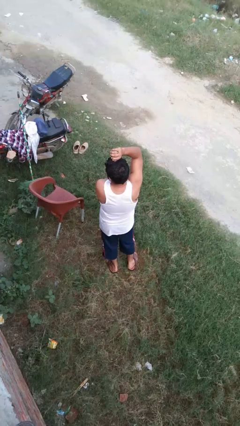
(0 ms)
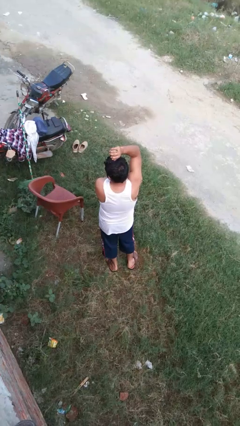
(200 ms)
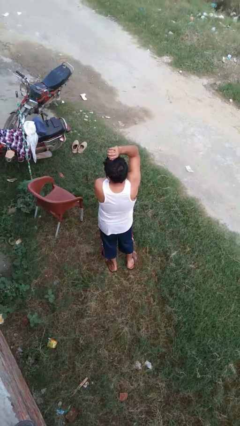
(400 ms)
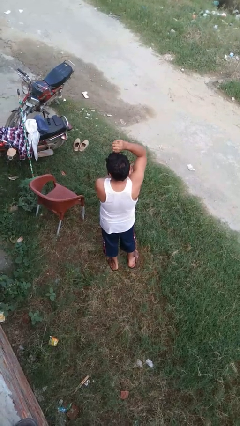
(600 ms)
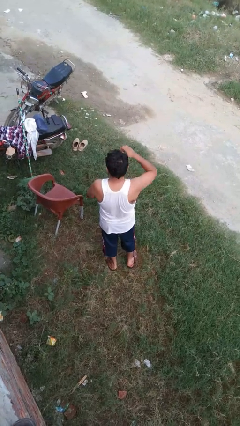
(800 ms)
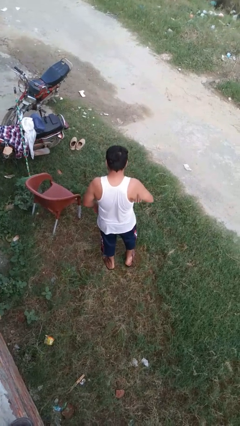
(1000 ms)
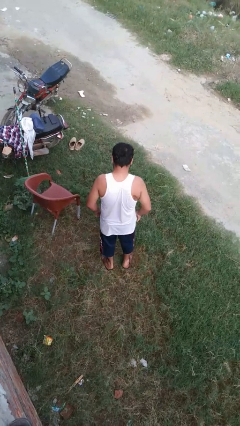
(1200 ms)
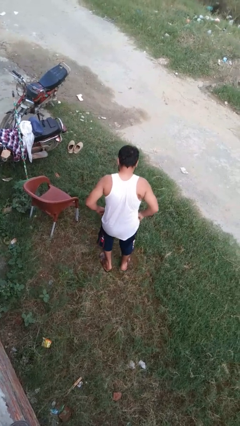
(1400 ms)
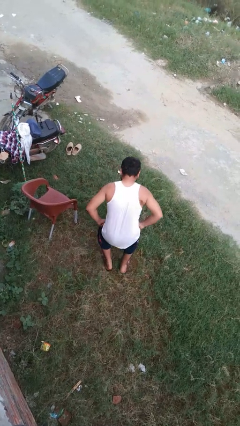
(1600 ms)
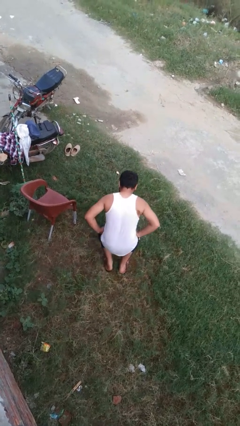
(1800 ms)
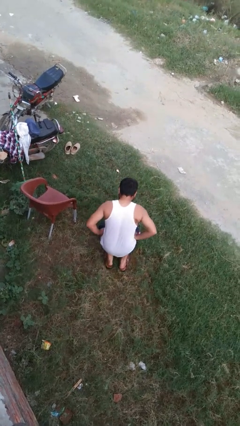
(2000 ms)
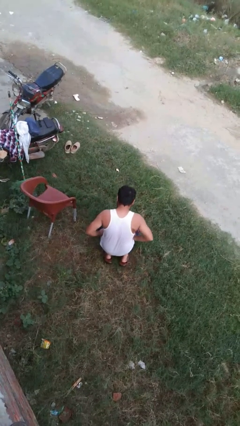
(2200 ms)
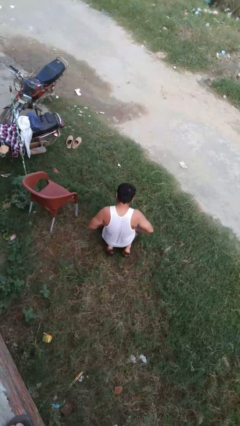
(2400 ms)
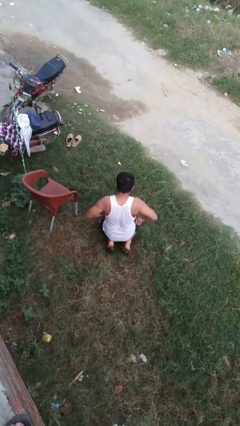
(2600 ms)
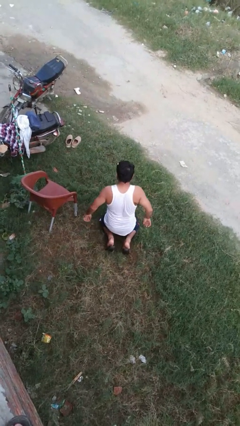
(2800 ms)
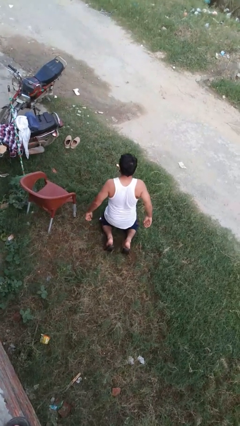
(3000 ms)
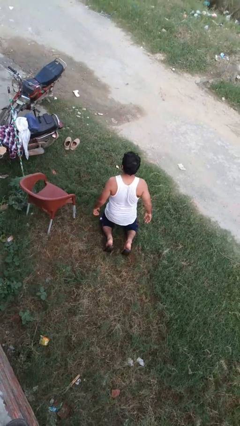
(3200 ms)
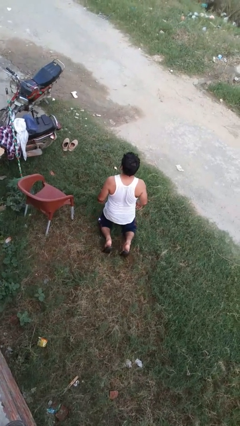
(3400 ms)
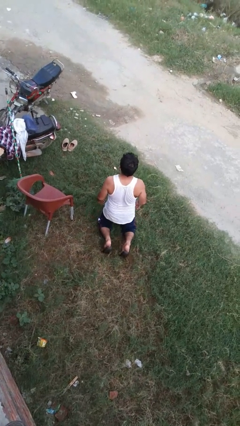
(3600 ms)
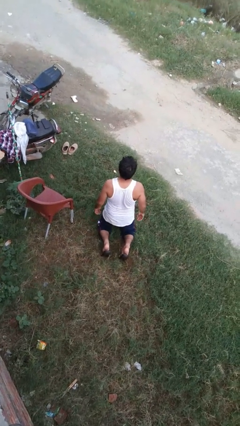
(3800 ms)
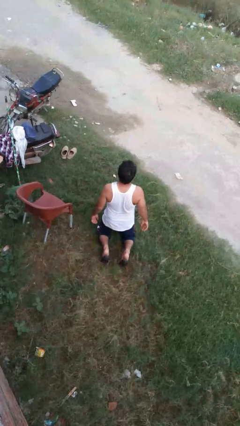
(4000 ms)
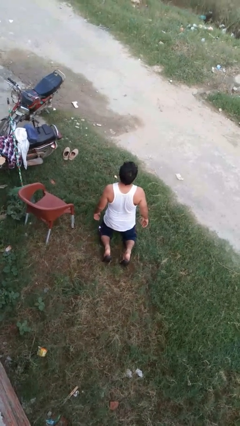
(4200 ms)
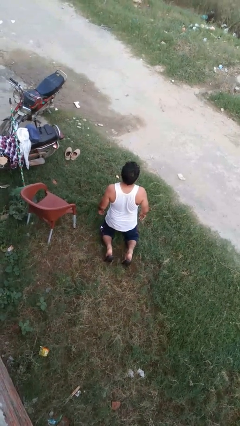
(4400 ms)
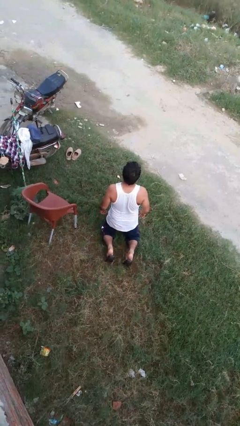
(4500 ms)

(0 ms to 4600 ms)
person kneels

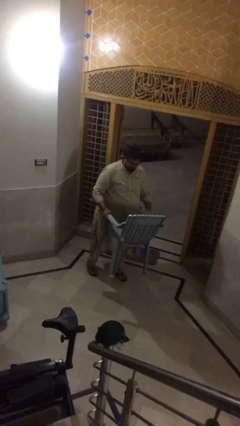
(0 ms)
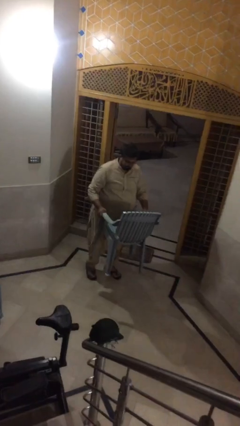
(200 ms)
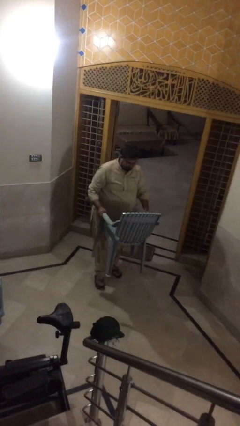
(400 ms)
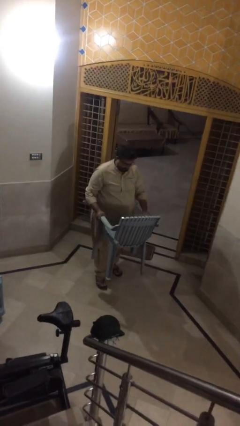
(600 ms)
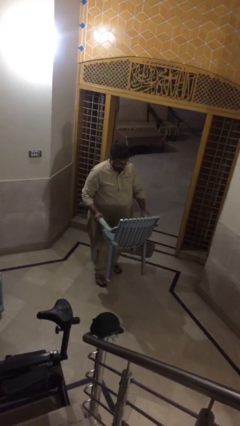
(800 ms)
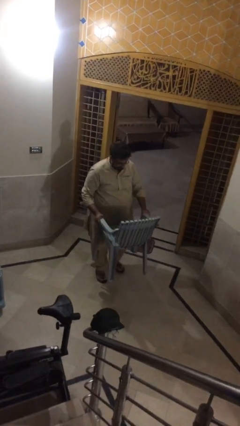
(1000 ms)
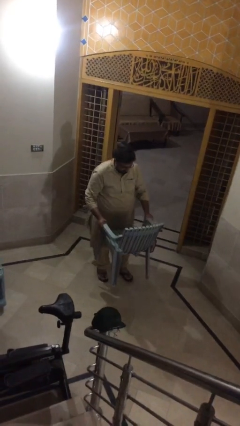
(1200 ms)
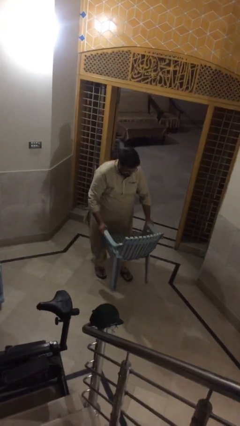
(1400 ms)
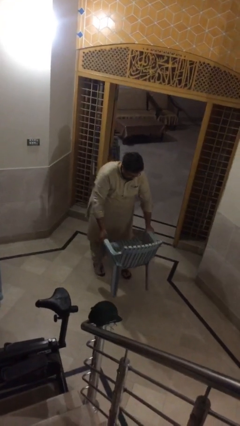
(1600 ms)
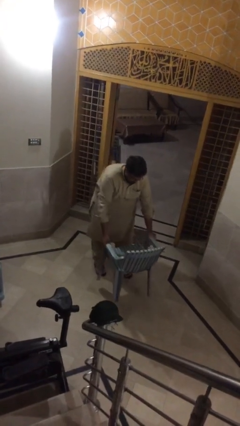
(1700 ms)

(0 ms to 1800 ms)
person puts down object on floor

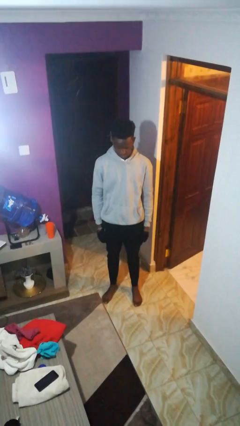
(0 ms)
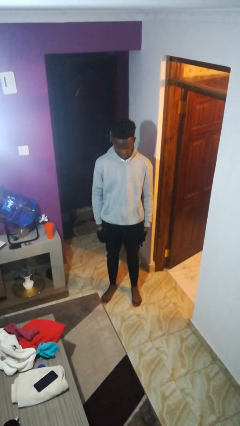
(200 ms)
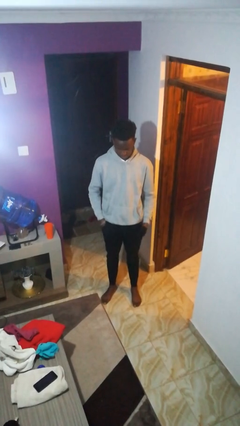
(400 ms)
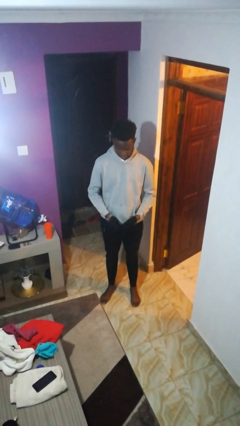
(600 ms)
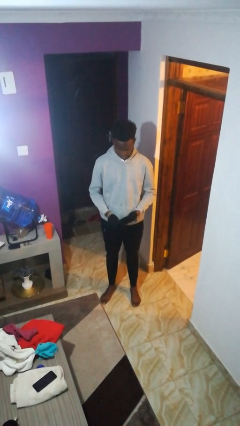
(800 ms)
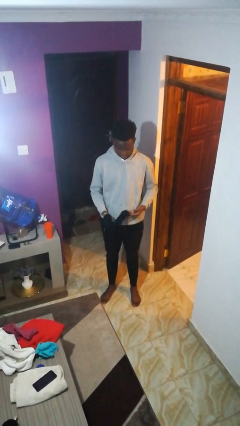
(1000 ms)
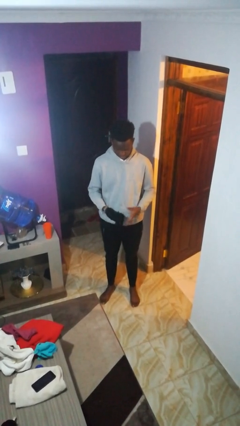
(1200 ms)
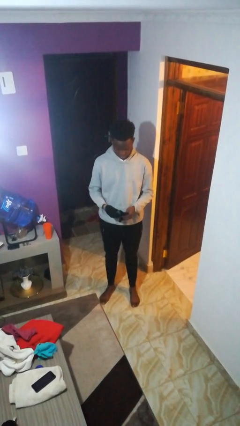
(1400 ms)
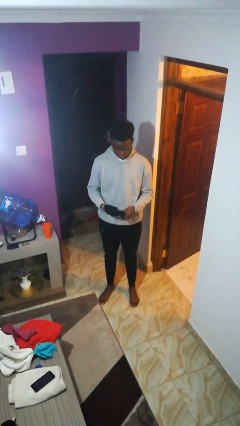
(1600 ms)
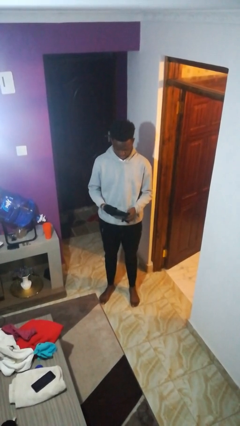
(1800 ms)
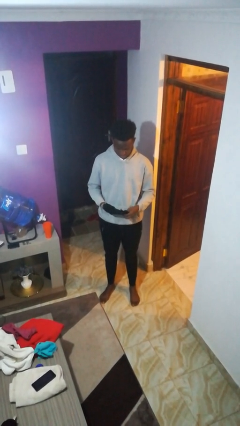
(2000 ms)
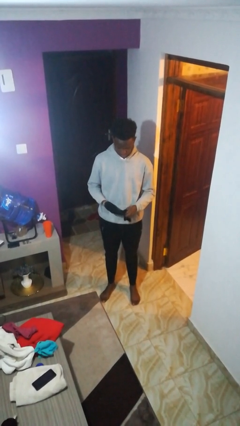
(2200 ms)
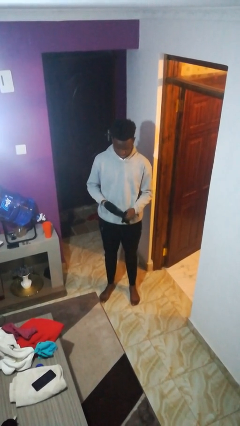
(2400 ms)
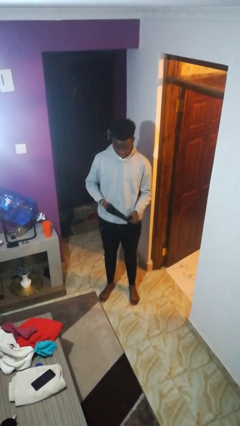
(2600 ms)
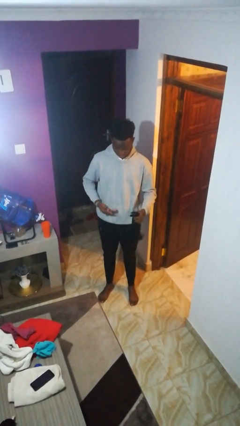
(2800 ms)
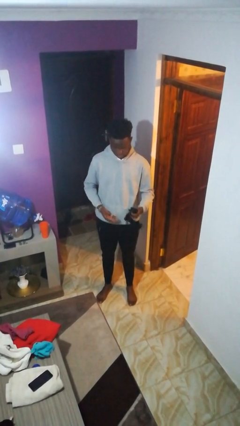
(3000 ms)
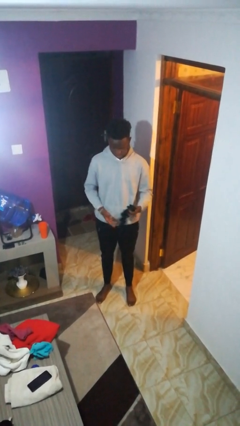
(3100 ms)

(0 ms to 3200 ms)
person takes off gloves

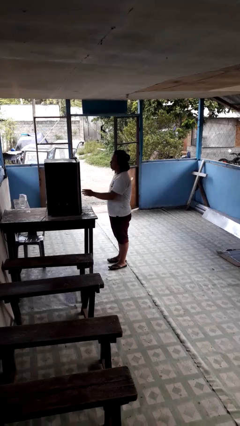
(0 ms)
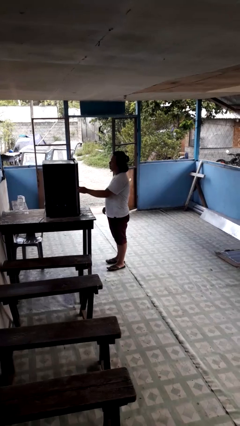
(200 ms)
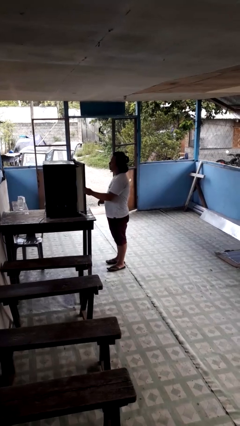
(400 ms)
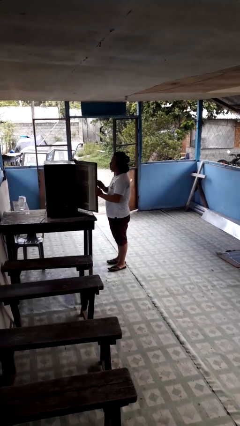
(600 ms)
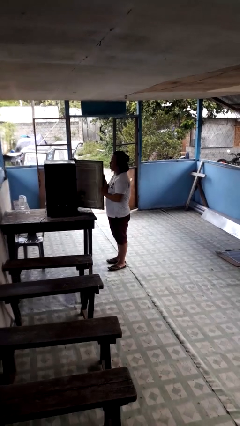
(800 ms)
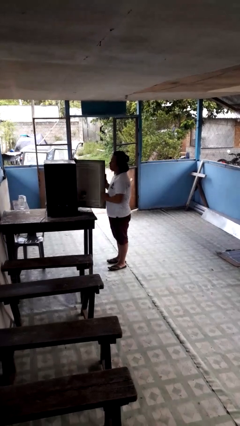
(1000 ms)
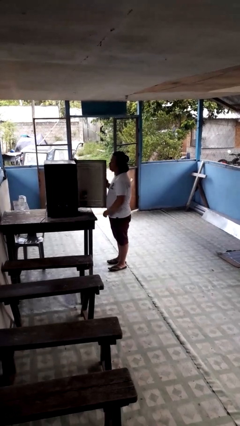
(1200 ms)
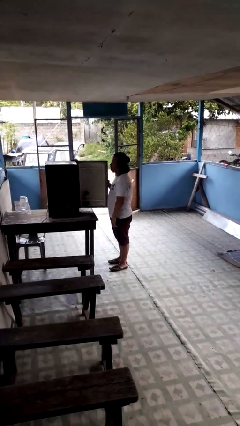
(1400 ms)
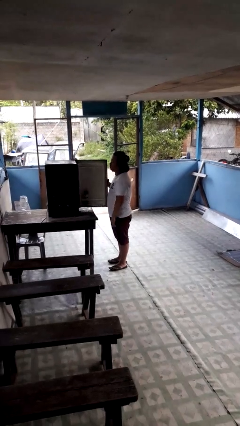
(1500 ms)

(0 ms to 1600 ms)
person opens refrigerator

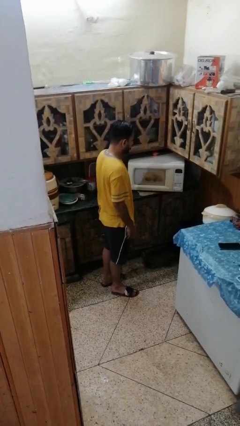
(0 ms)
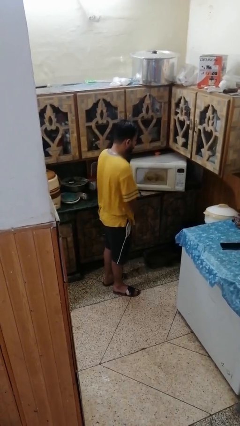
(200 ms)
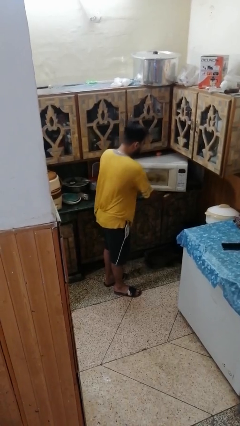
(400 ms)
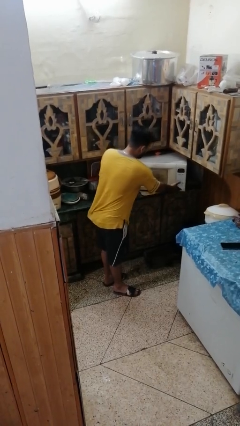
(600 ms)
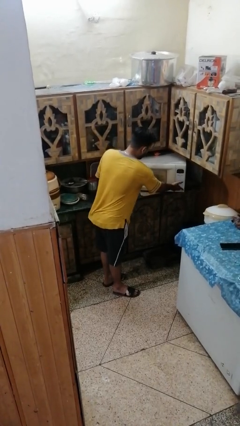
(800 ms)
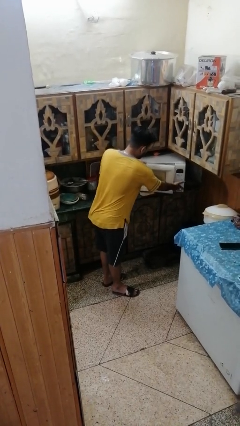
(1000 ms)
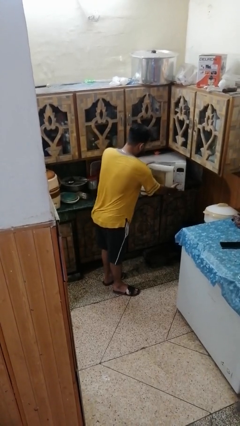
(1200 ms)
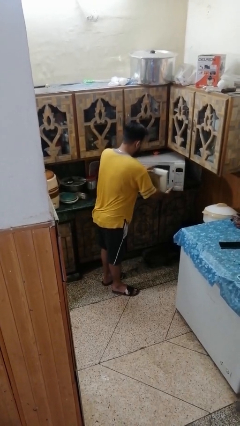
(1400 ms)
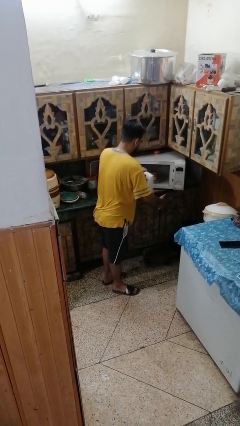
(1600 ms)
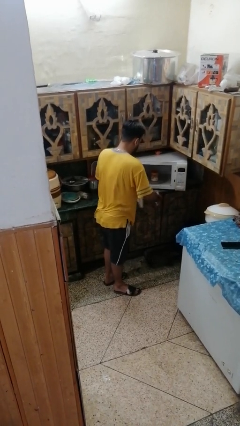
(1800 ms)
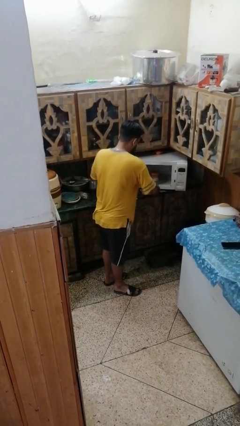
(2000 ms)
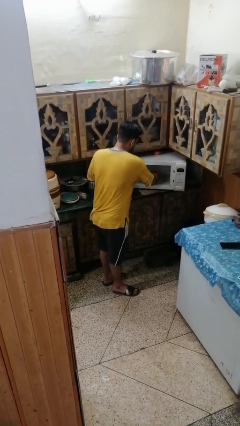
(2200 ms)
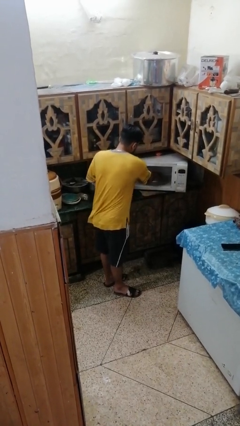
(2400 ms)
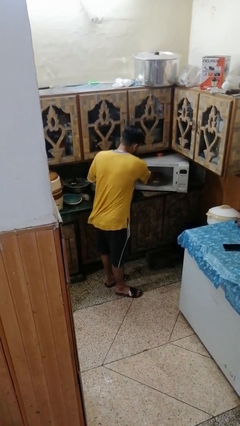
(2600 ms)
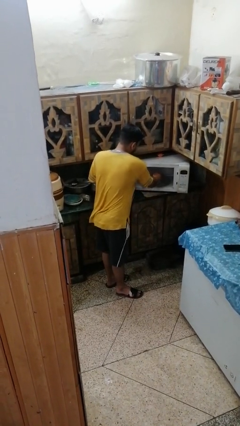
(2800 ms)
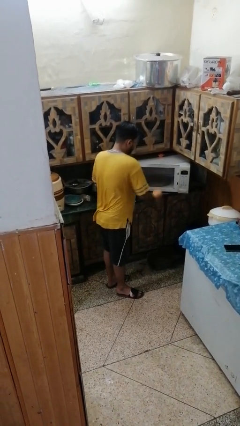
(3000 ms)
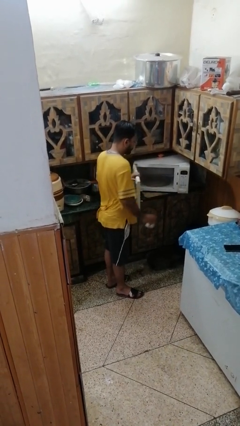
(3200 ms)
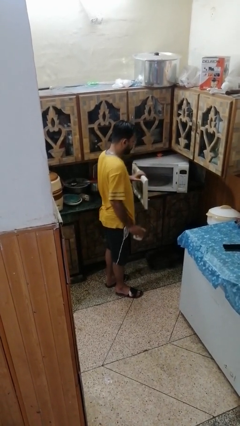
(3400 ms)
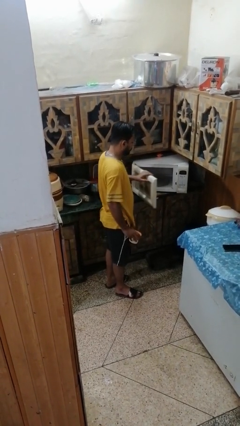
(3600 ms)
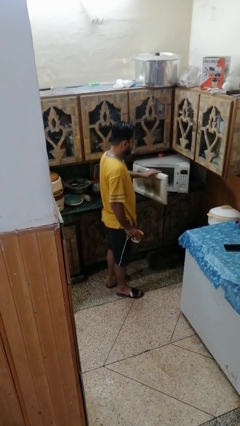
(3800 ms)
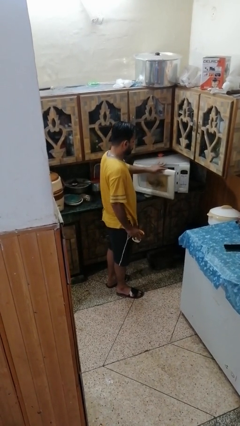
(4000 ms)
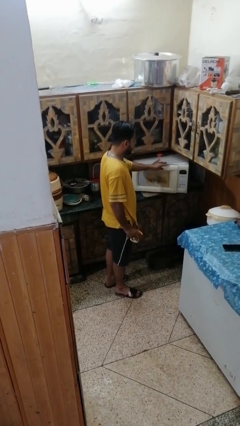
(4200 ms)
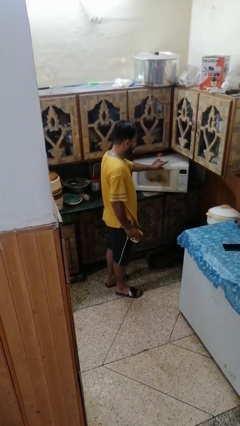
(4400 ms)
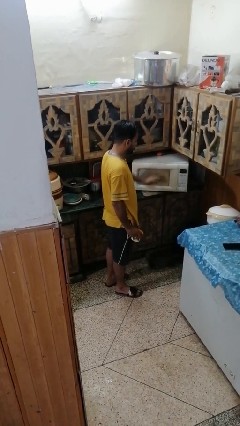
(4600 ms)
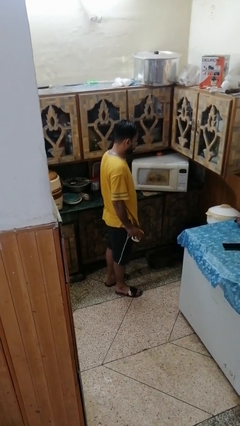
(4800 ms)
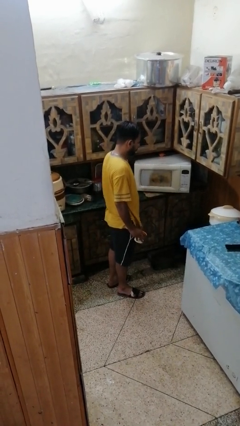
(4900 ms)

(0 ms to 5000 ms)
person takes object from refrigerator

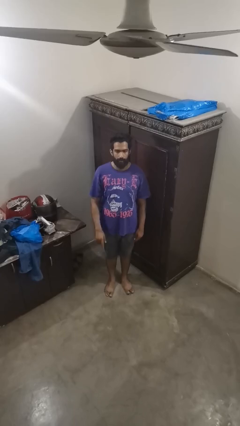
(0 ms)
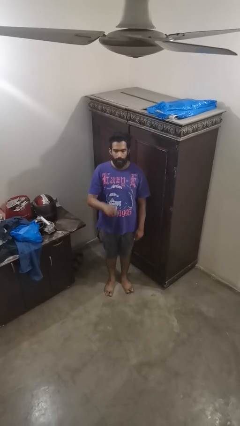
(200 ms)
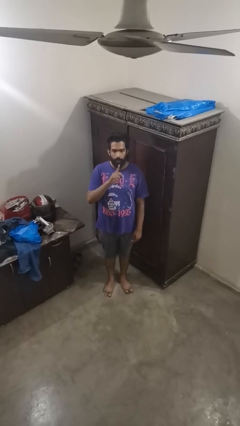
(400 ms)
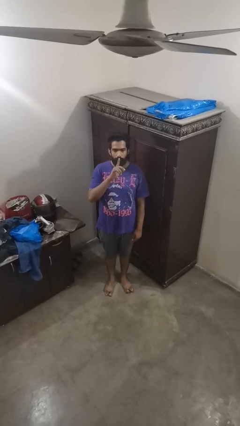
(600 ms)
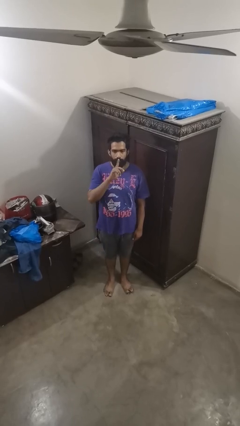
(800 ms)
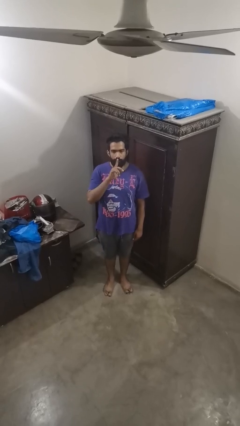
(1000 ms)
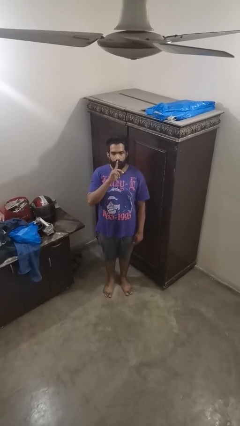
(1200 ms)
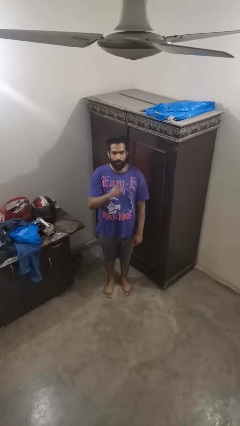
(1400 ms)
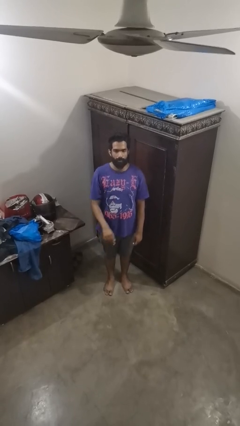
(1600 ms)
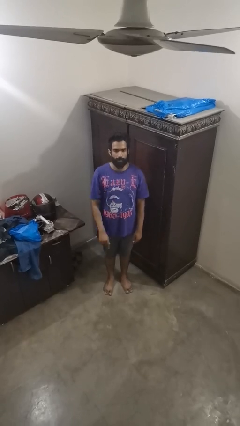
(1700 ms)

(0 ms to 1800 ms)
person gestures be quiet
